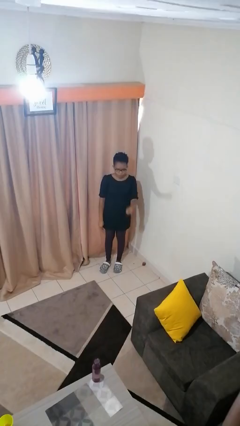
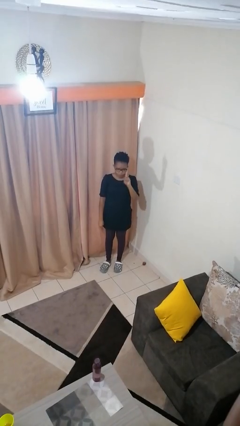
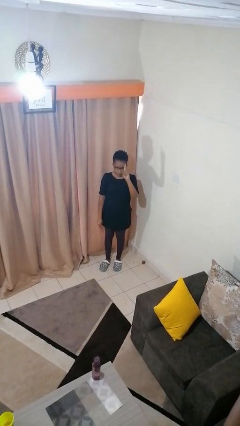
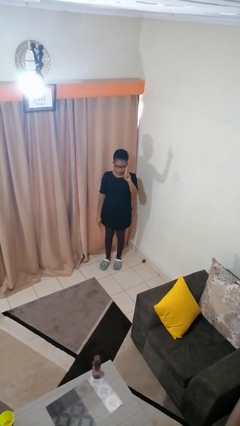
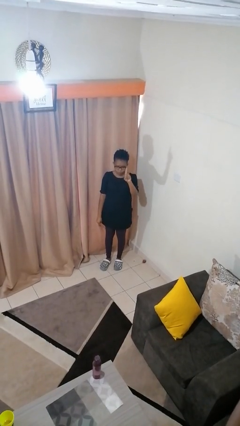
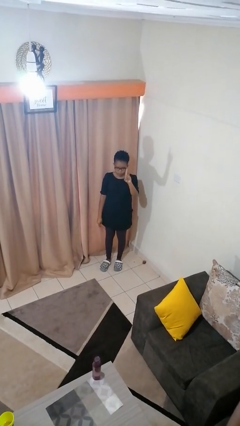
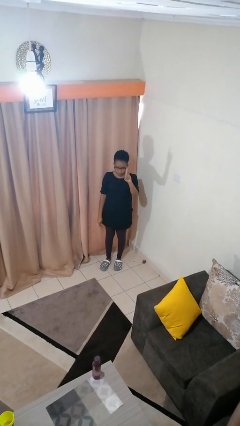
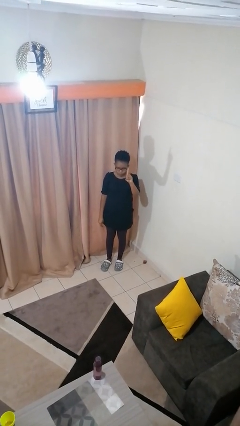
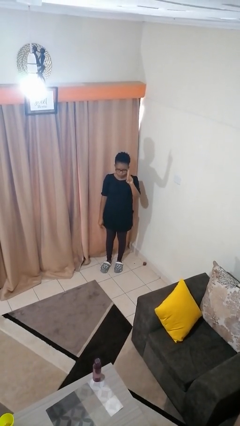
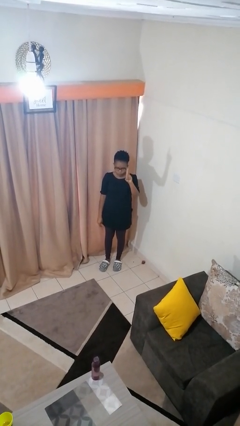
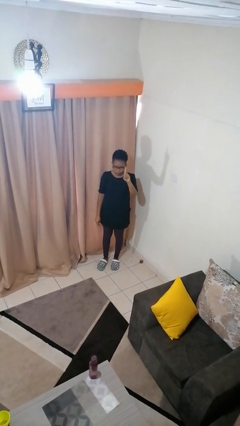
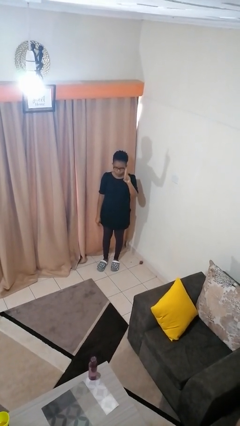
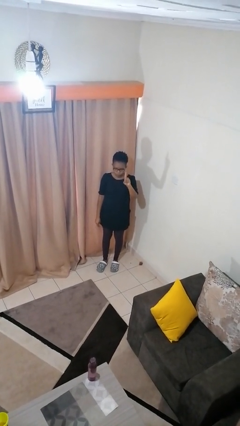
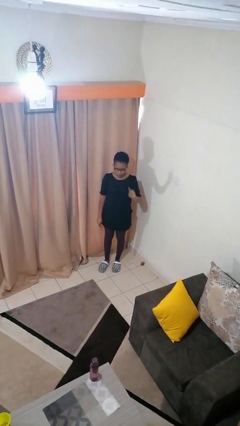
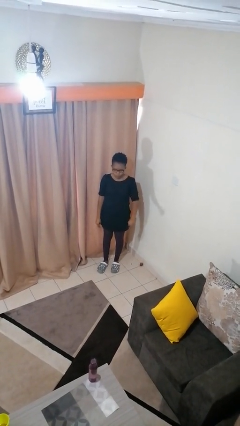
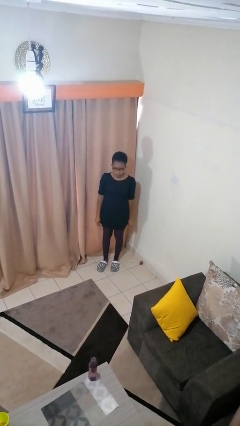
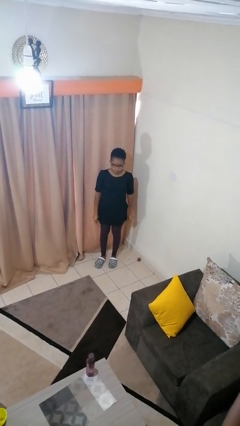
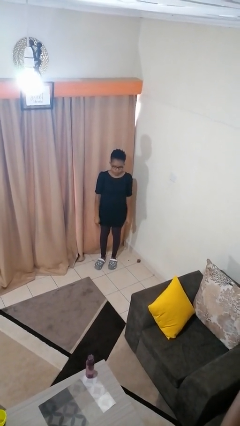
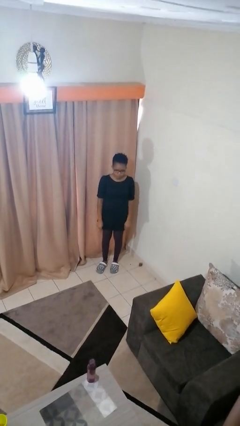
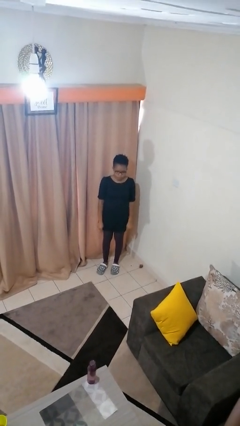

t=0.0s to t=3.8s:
person gestures number one

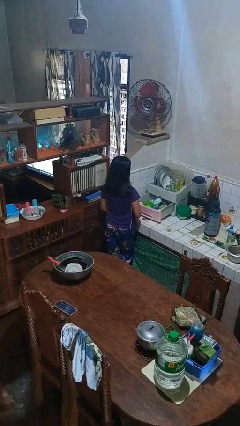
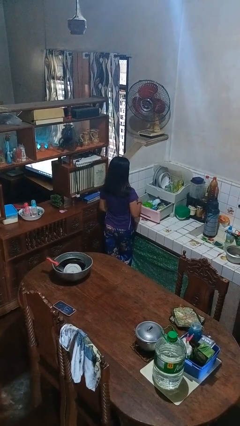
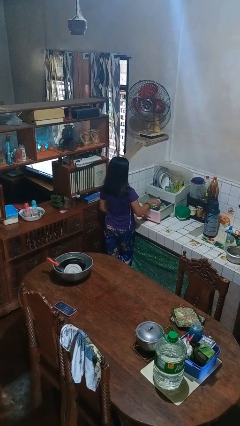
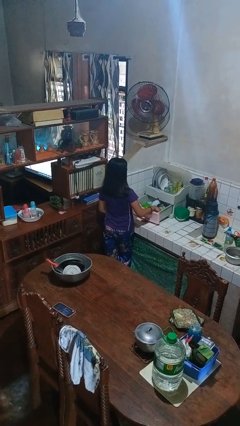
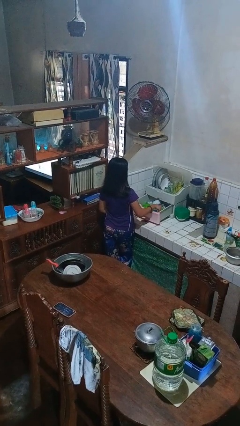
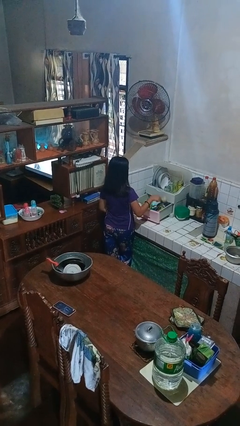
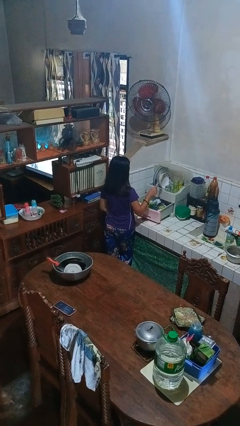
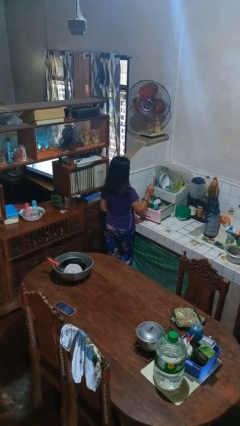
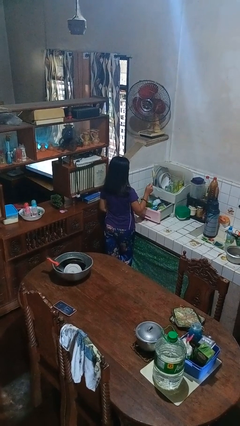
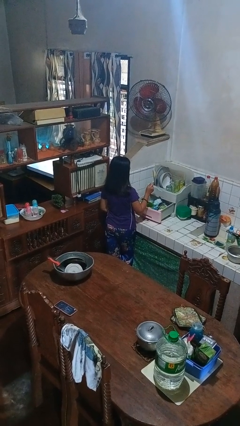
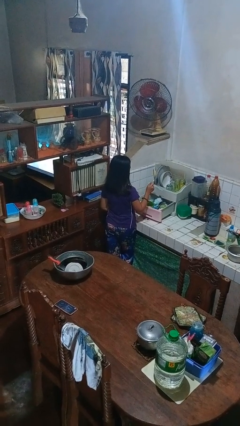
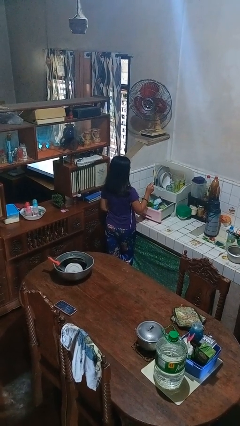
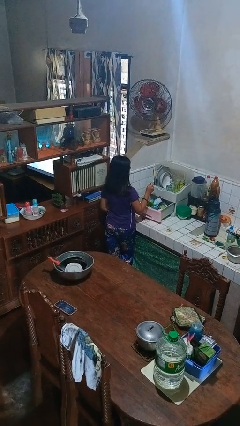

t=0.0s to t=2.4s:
person takes object from kitchen drawer

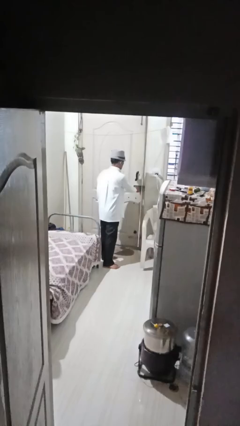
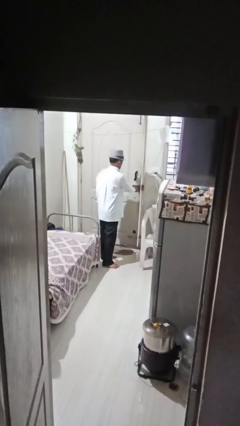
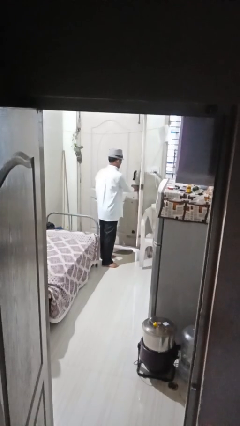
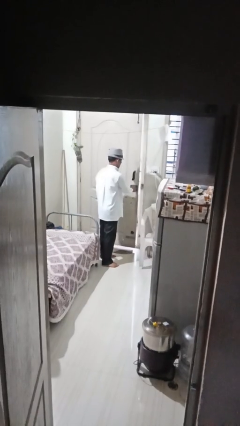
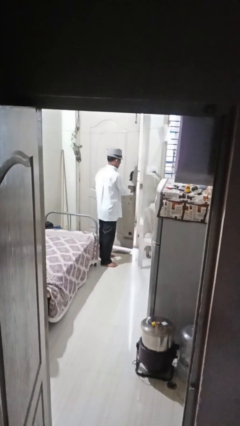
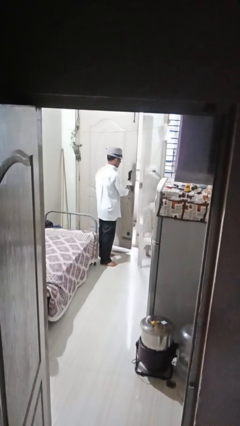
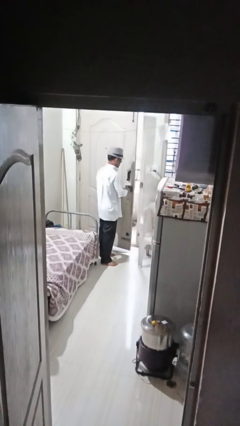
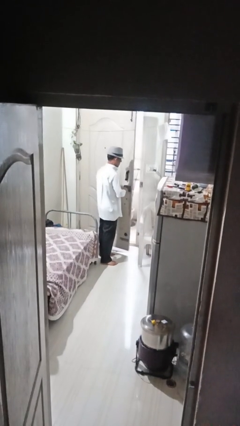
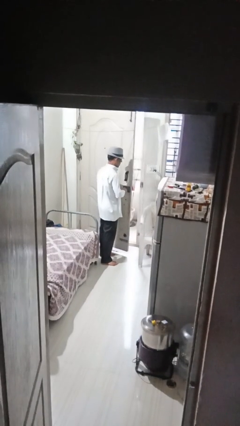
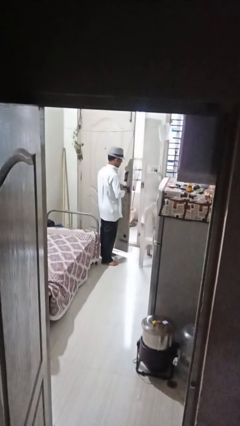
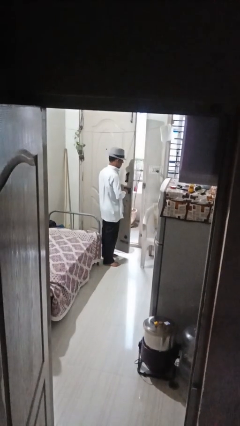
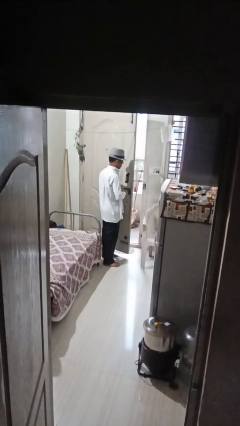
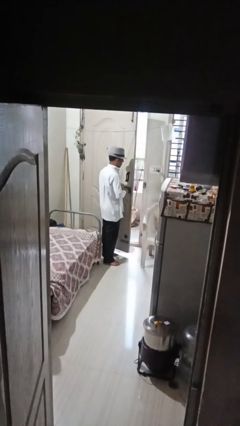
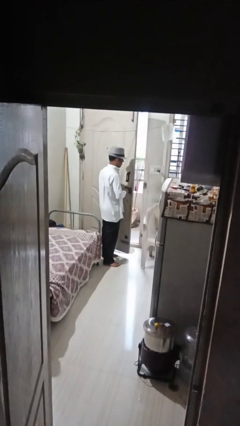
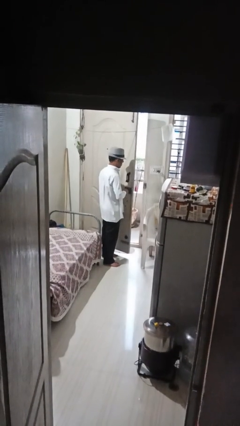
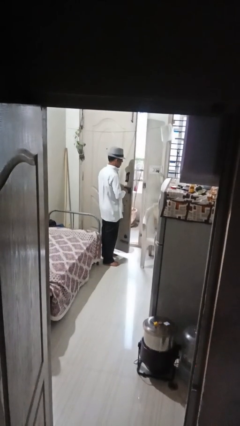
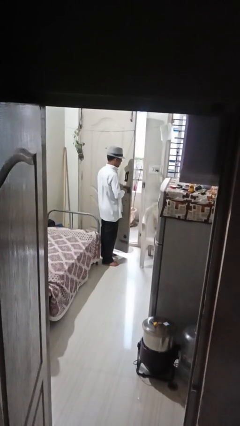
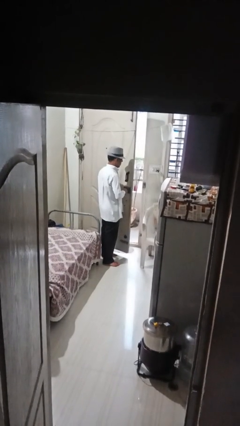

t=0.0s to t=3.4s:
person opens facility door

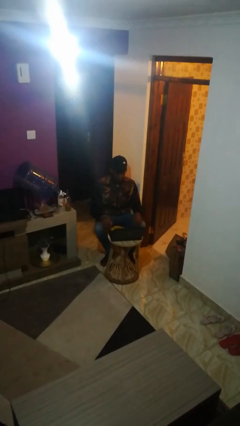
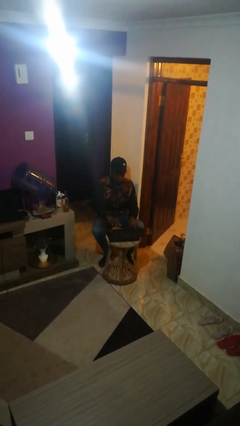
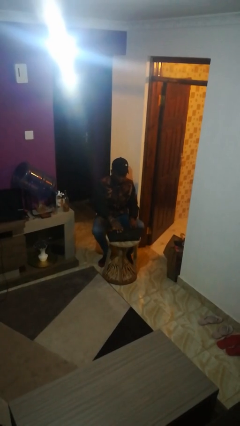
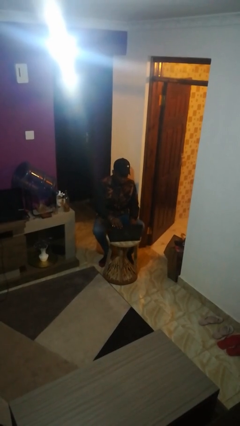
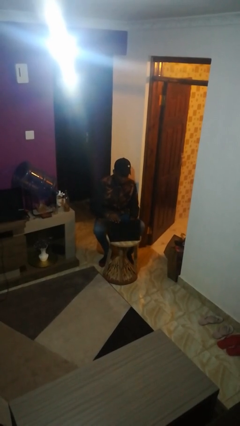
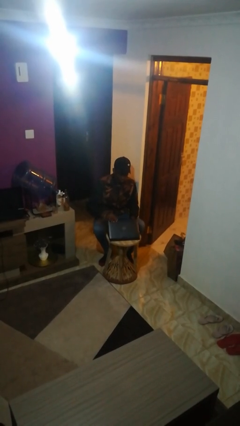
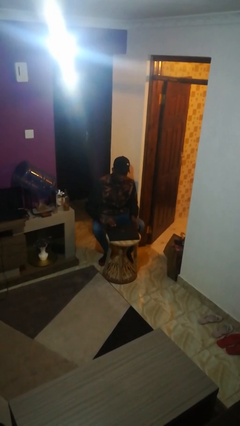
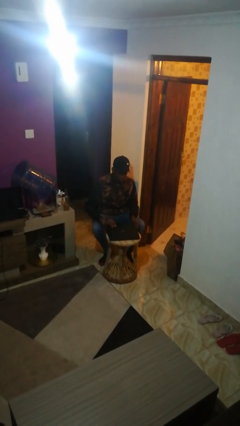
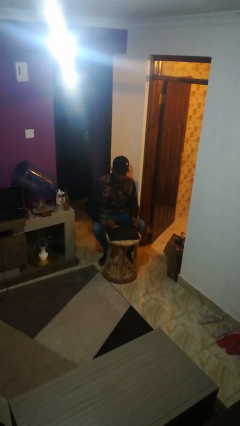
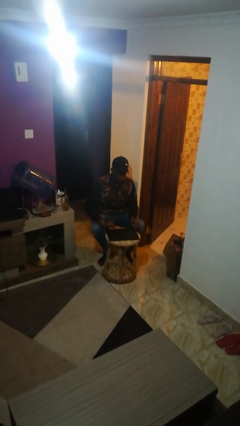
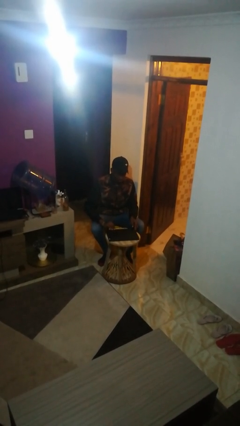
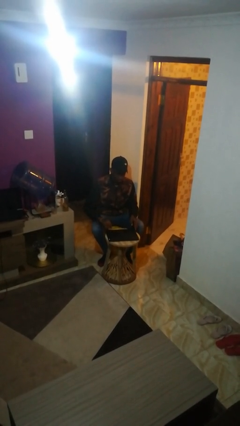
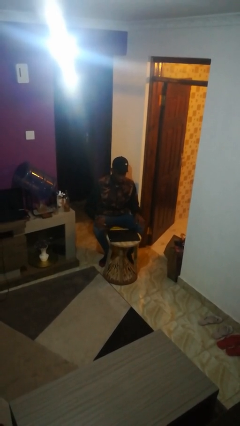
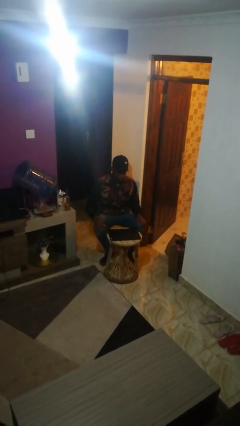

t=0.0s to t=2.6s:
person closes laptop

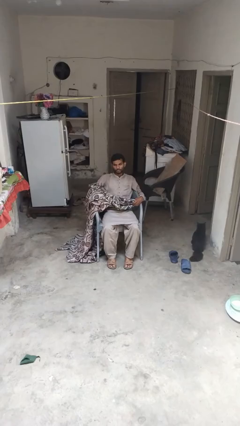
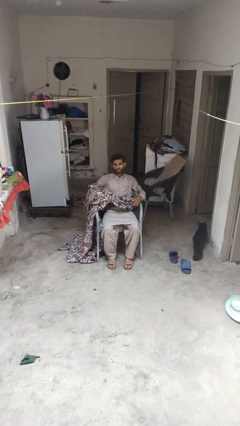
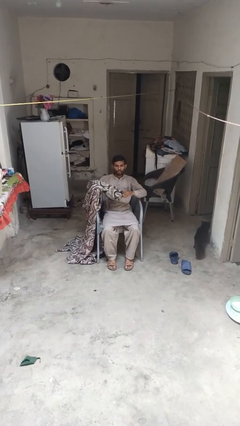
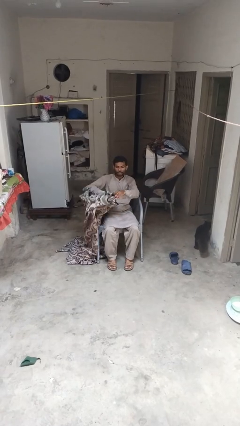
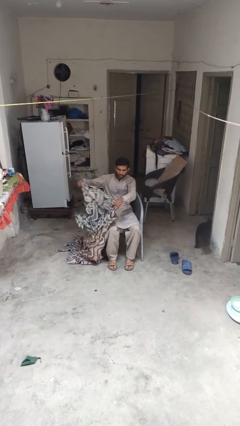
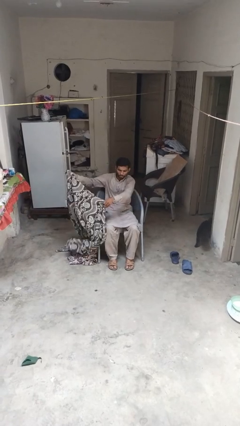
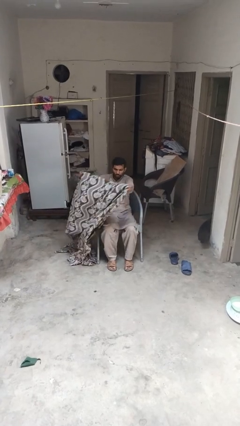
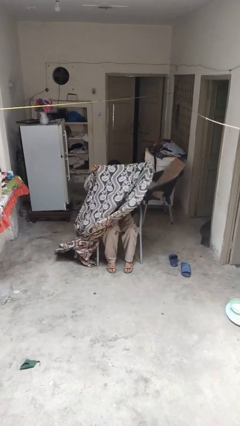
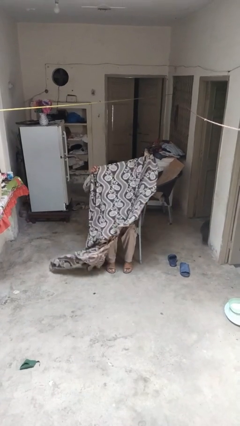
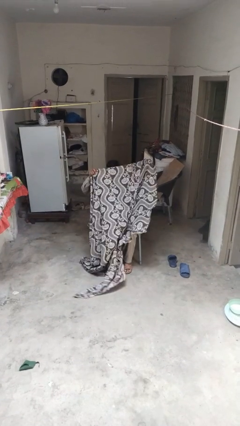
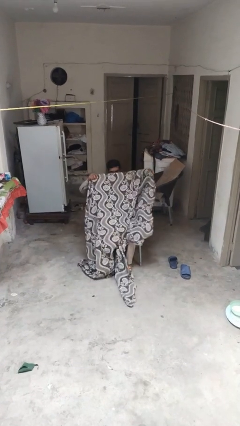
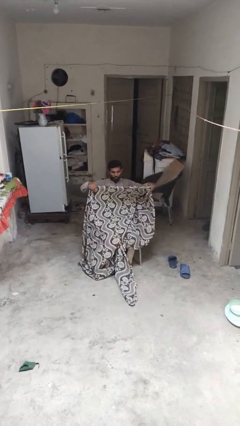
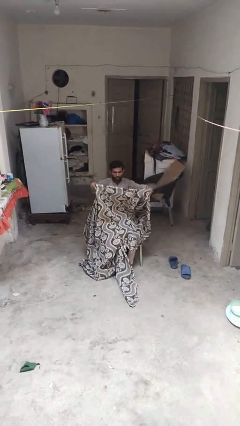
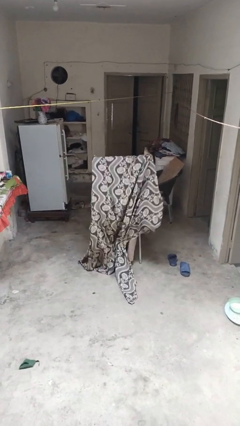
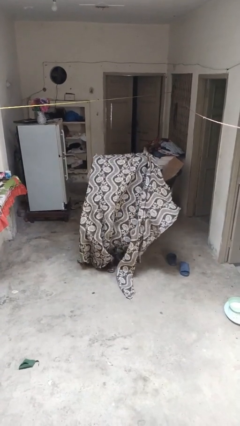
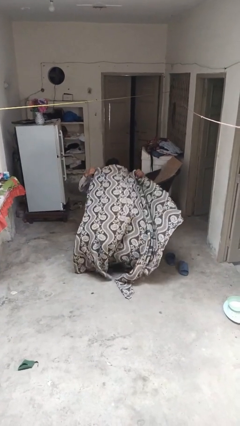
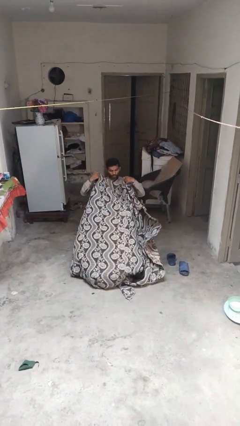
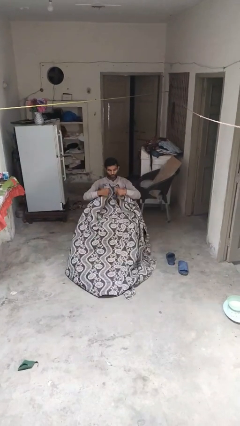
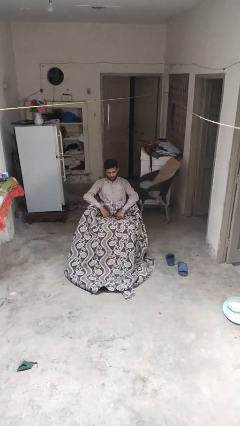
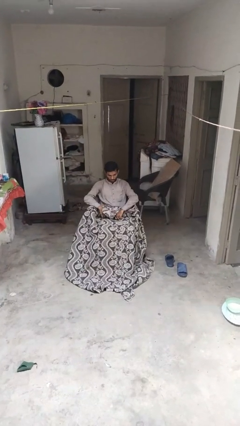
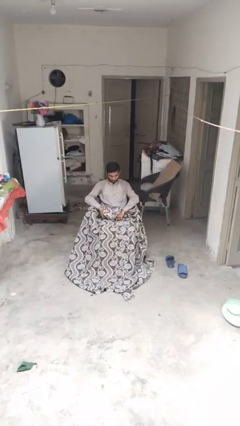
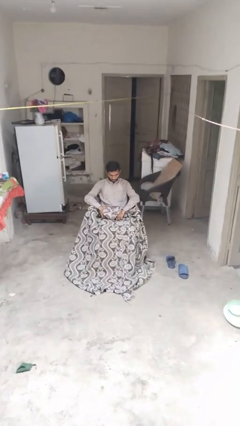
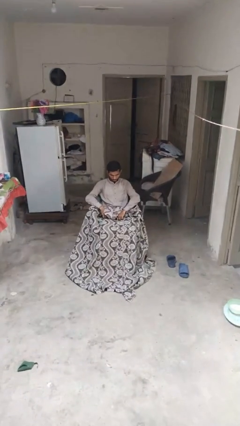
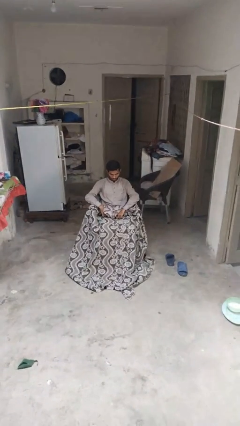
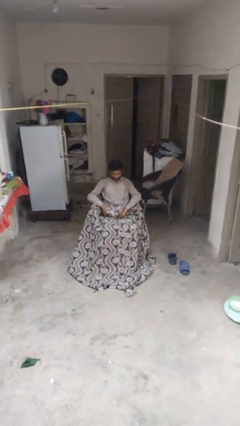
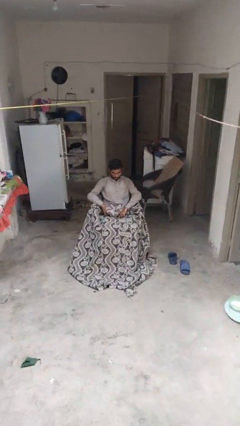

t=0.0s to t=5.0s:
person covers with blanket

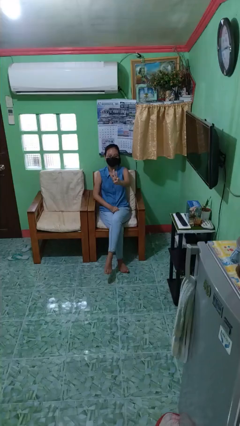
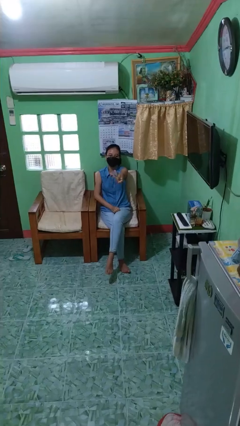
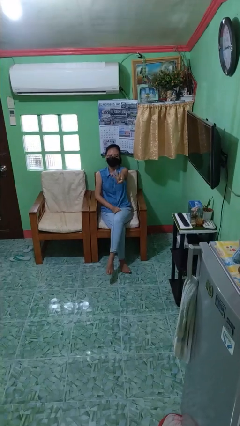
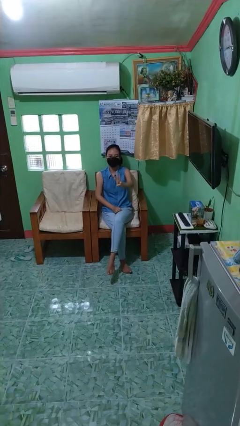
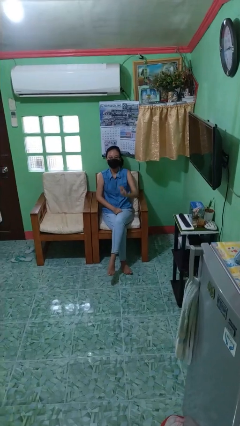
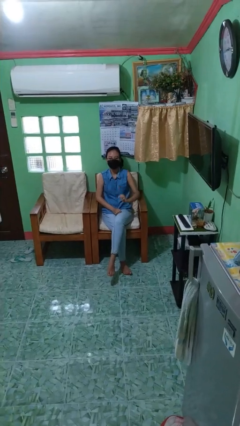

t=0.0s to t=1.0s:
person gestures number three
